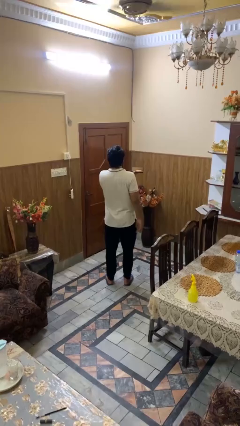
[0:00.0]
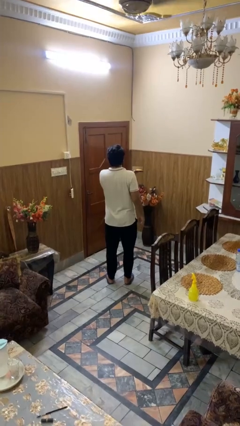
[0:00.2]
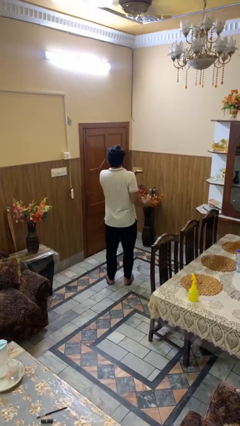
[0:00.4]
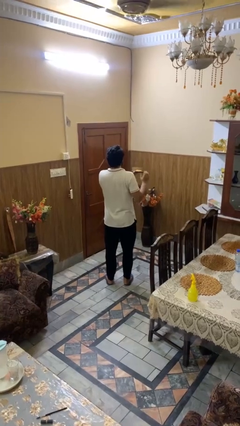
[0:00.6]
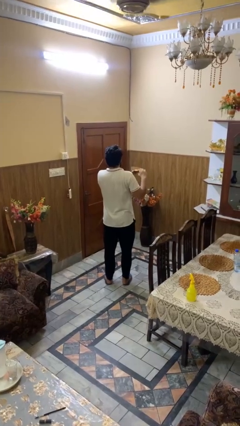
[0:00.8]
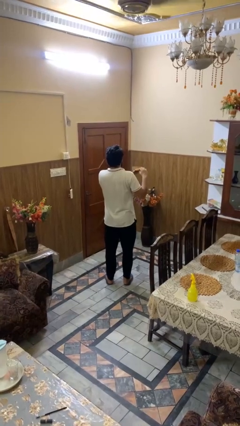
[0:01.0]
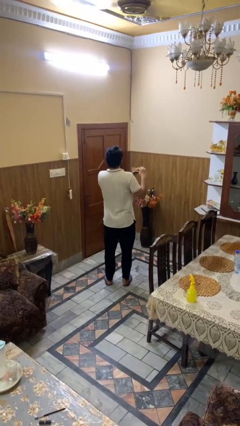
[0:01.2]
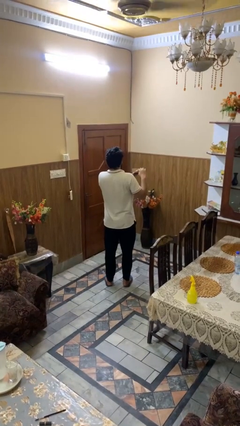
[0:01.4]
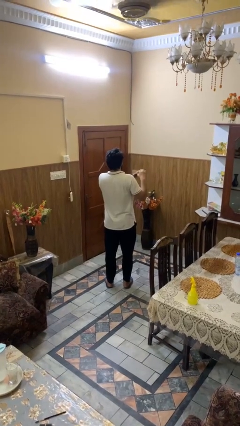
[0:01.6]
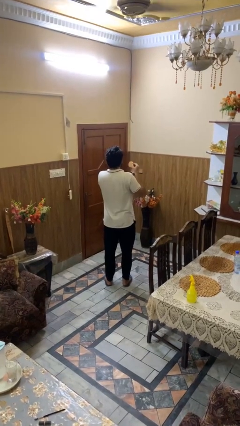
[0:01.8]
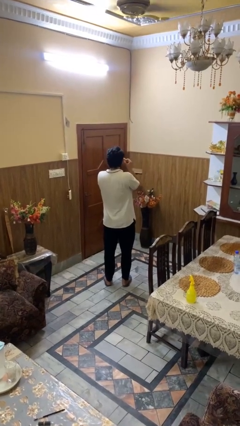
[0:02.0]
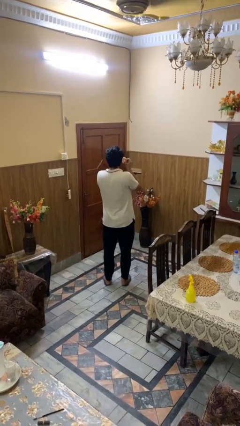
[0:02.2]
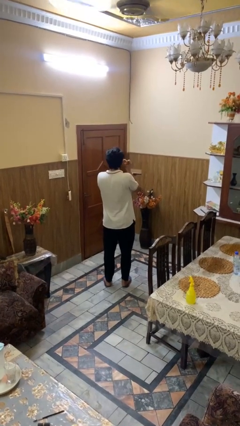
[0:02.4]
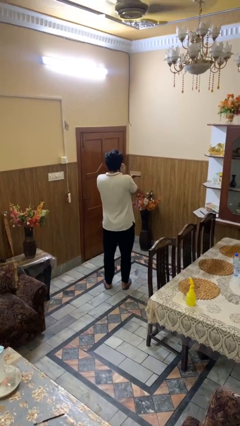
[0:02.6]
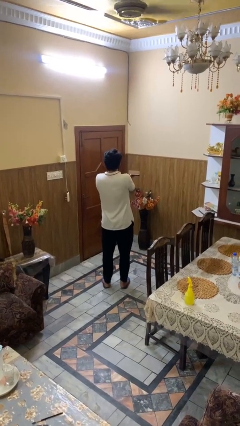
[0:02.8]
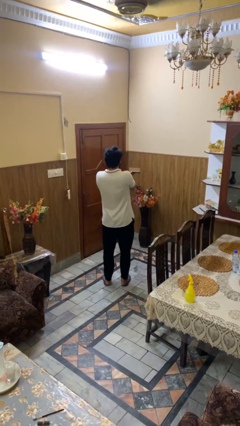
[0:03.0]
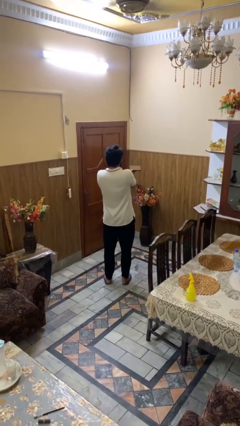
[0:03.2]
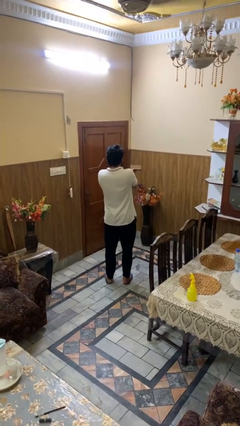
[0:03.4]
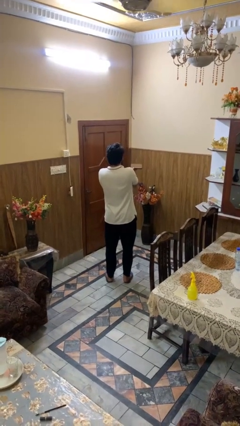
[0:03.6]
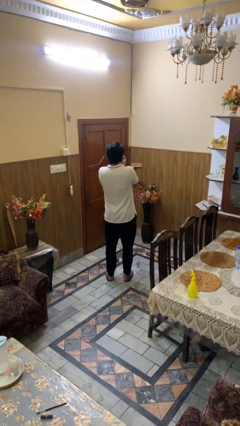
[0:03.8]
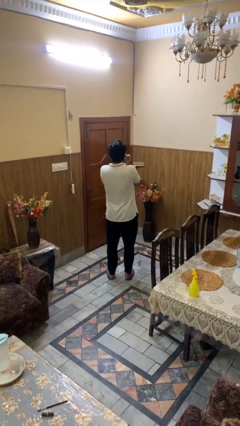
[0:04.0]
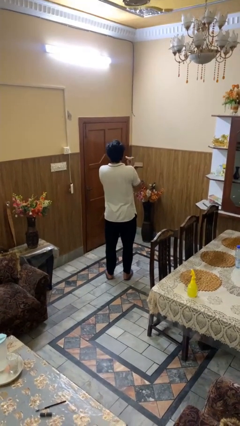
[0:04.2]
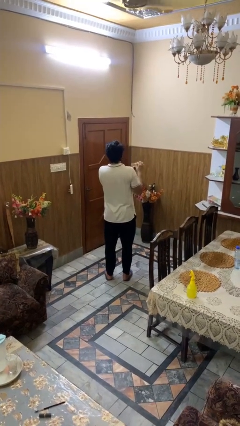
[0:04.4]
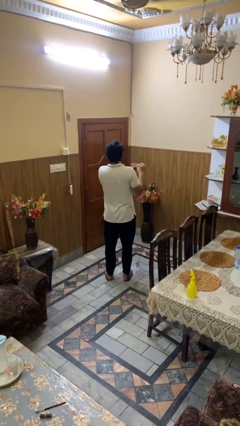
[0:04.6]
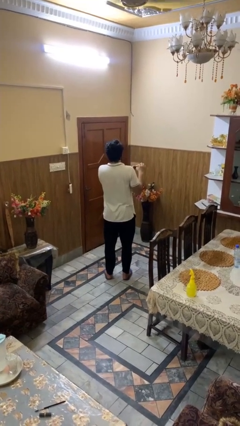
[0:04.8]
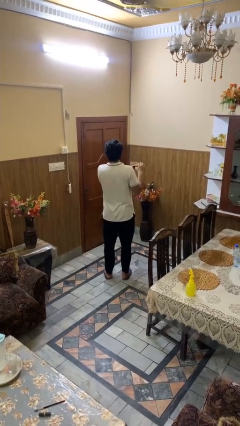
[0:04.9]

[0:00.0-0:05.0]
person applies foundation makeup

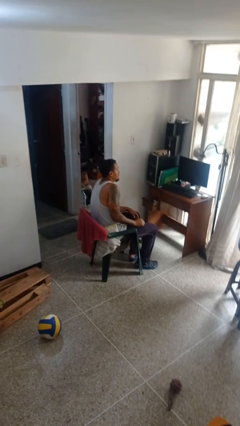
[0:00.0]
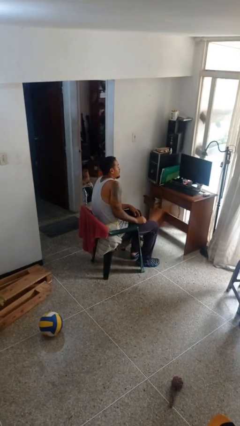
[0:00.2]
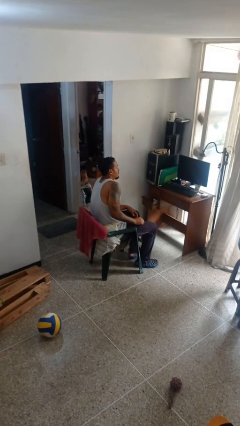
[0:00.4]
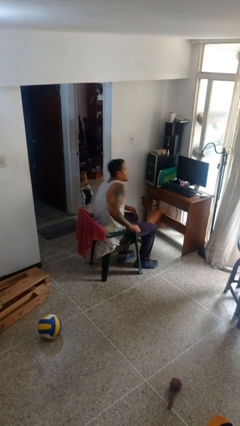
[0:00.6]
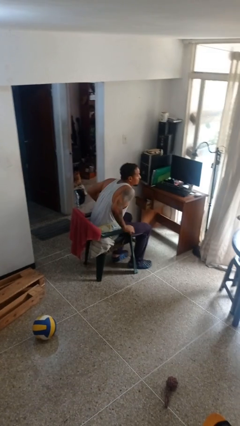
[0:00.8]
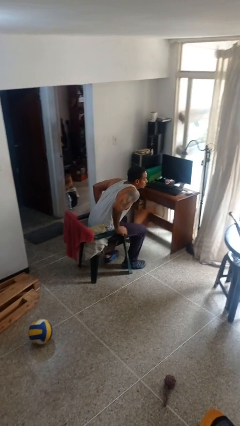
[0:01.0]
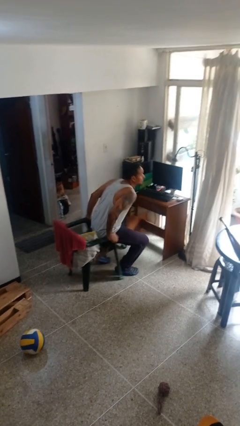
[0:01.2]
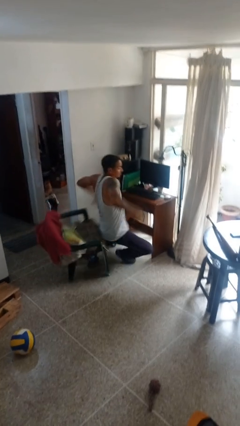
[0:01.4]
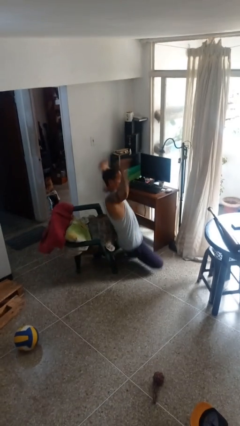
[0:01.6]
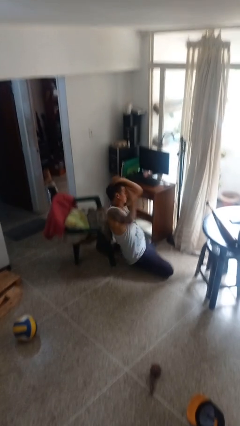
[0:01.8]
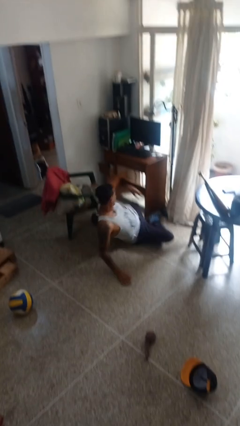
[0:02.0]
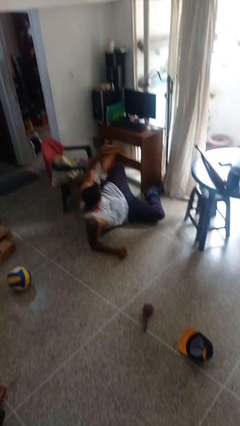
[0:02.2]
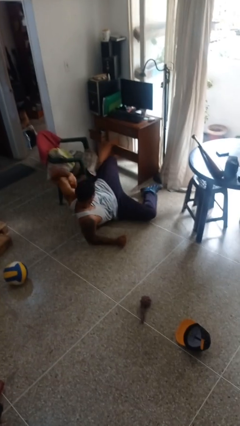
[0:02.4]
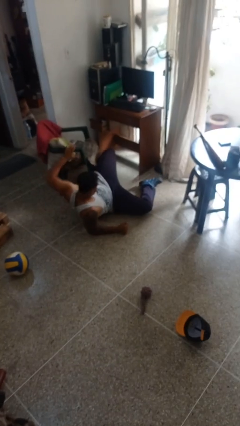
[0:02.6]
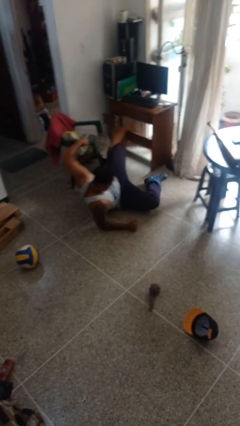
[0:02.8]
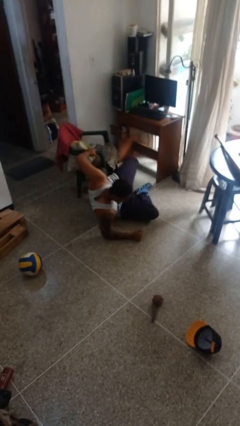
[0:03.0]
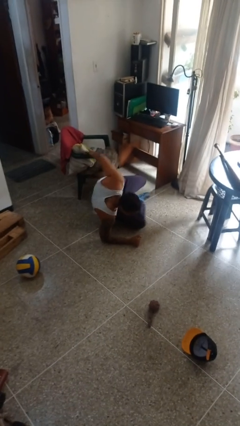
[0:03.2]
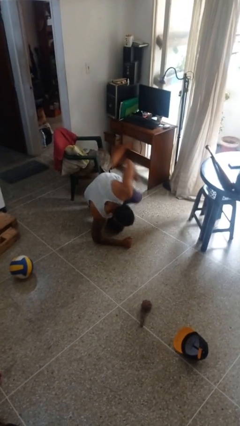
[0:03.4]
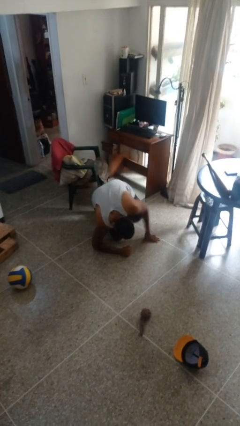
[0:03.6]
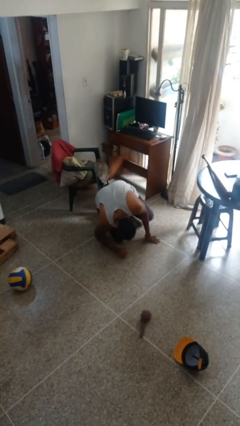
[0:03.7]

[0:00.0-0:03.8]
person falls from chair

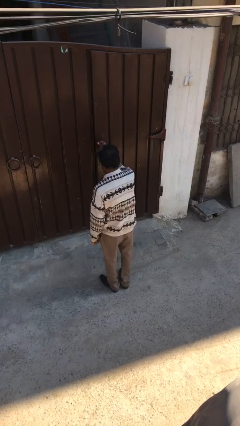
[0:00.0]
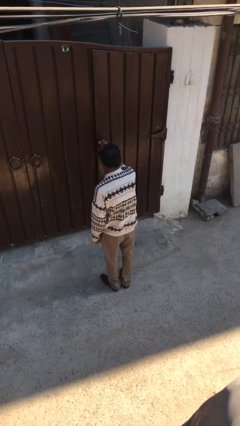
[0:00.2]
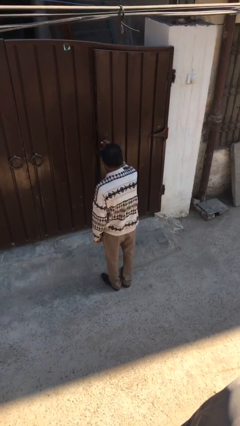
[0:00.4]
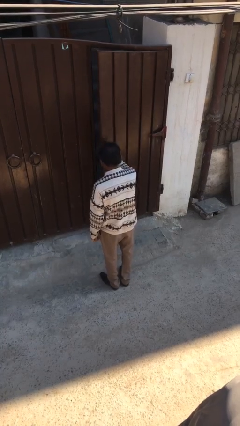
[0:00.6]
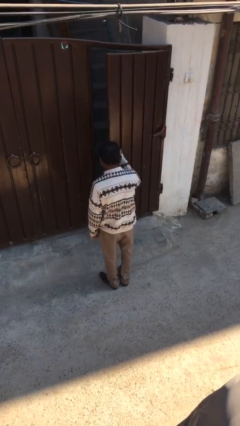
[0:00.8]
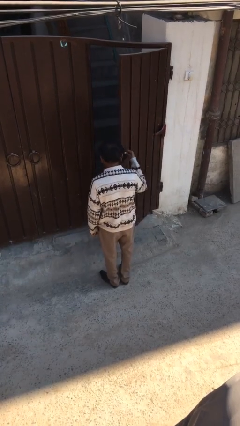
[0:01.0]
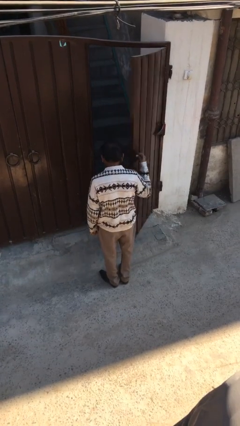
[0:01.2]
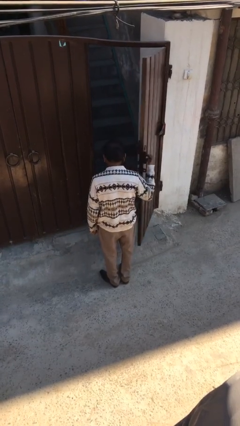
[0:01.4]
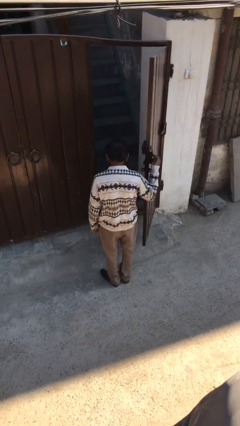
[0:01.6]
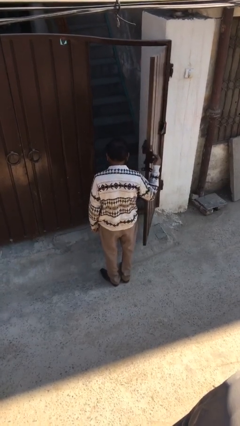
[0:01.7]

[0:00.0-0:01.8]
person opens facility door

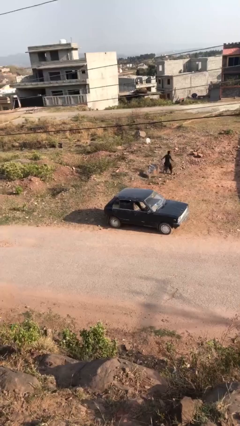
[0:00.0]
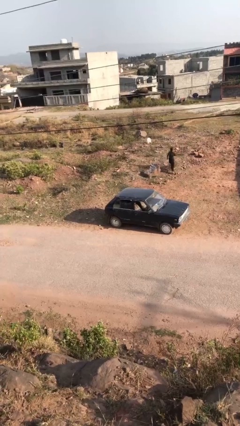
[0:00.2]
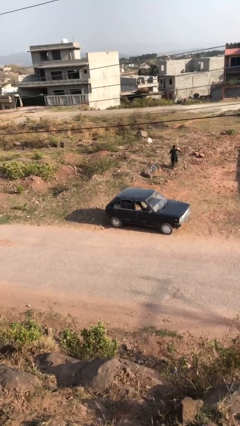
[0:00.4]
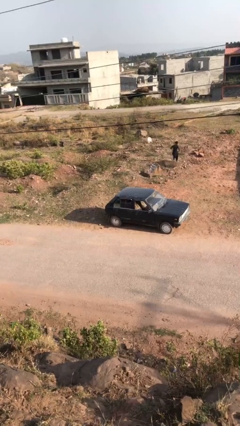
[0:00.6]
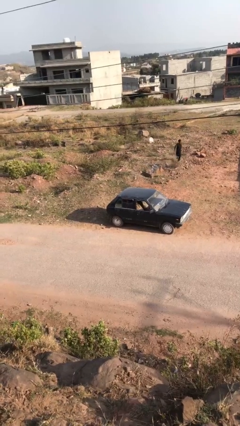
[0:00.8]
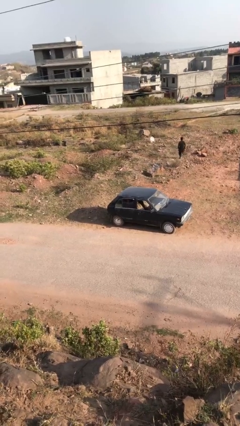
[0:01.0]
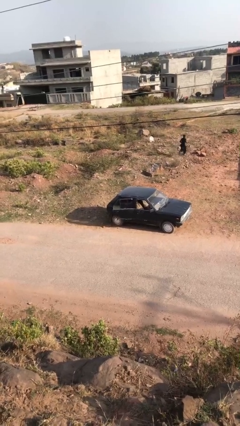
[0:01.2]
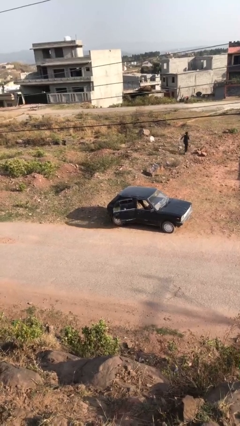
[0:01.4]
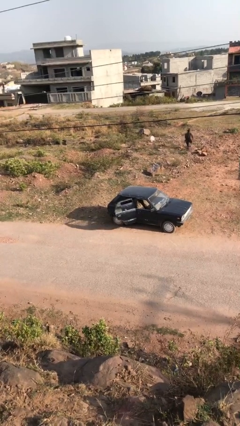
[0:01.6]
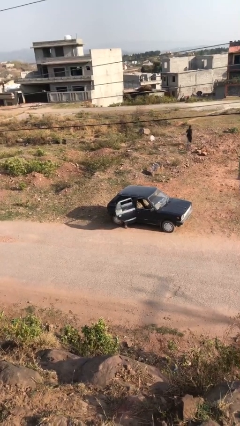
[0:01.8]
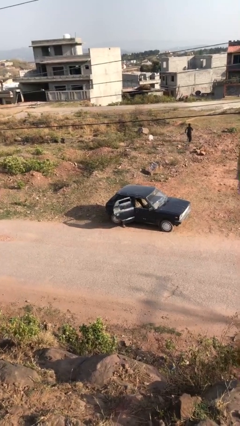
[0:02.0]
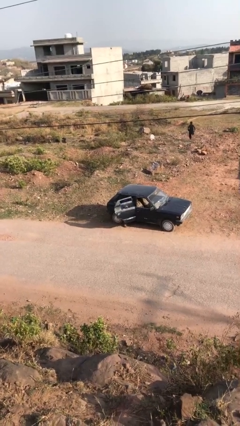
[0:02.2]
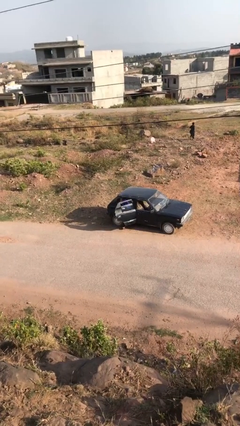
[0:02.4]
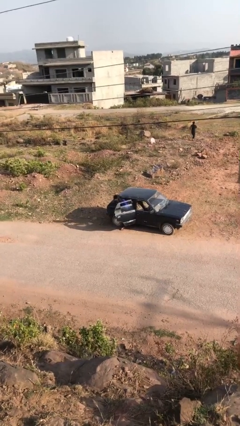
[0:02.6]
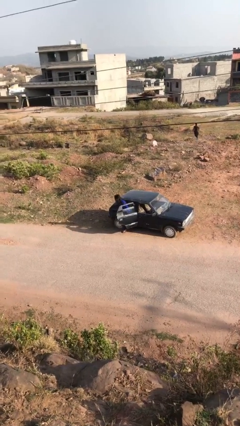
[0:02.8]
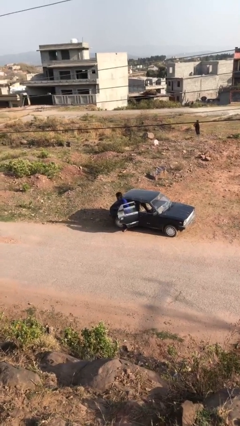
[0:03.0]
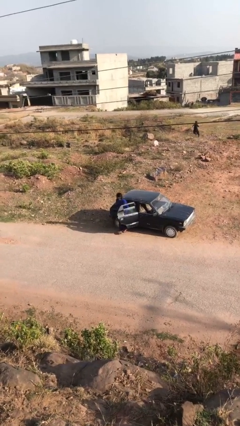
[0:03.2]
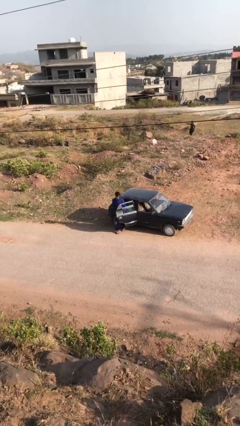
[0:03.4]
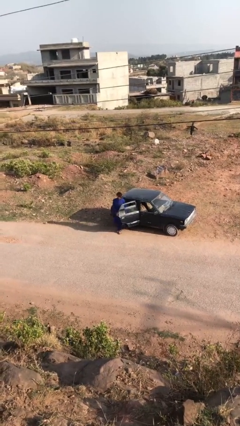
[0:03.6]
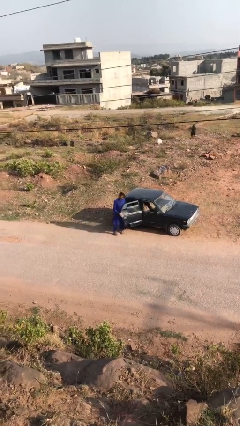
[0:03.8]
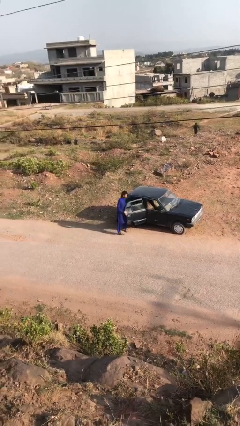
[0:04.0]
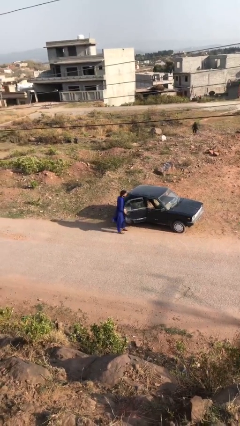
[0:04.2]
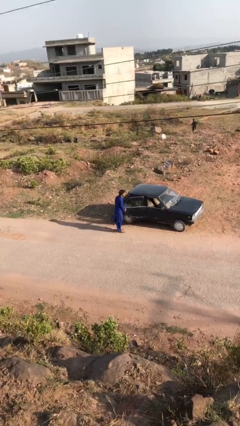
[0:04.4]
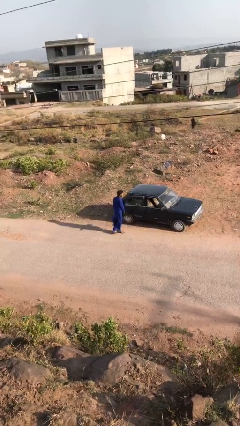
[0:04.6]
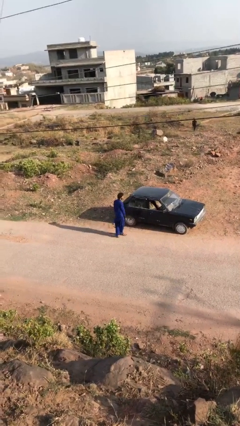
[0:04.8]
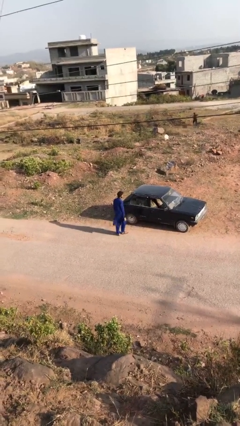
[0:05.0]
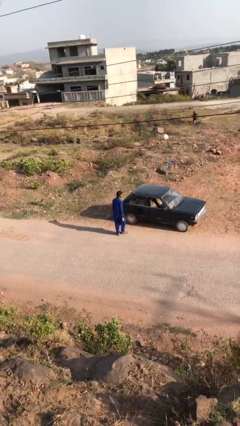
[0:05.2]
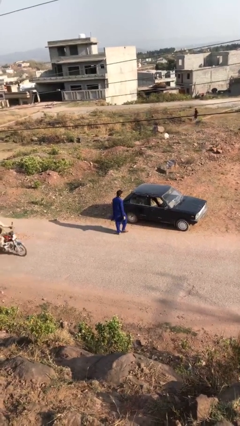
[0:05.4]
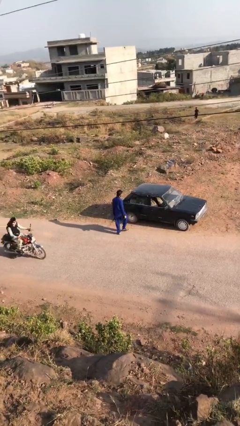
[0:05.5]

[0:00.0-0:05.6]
car drops off person

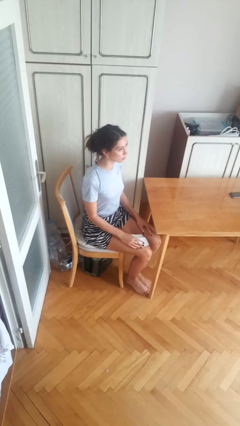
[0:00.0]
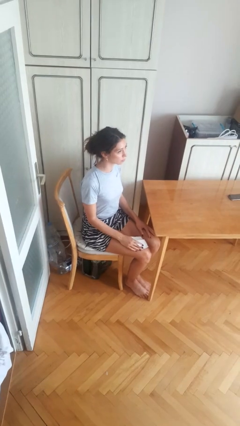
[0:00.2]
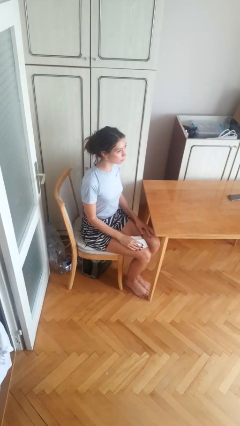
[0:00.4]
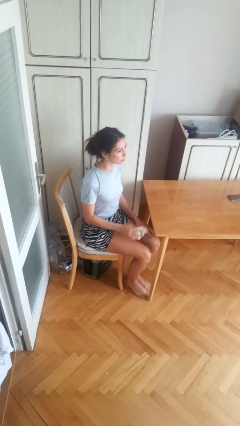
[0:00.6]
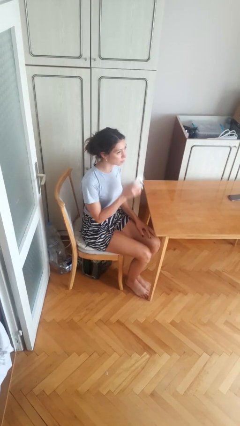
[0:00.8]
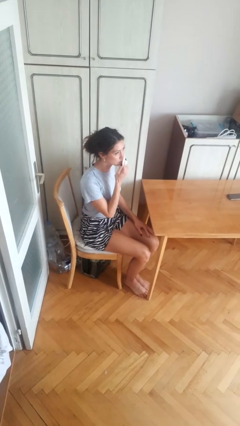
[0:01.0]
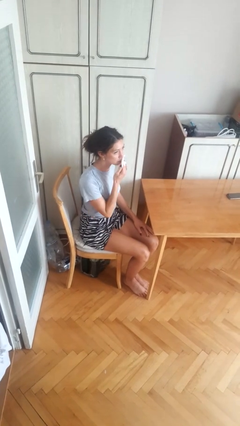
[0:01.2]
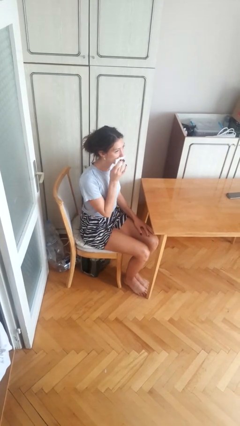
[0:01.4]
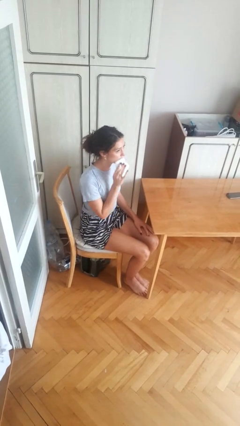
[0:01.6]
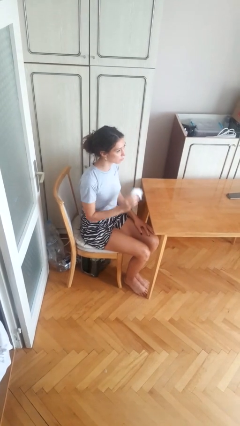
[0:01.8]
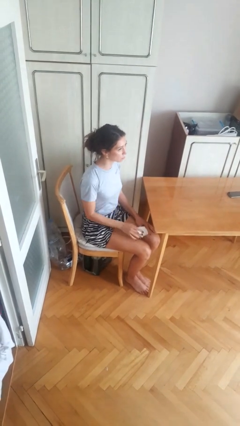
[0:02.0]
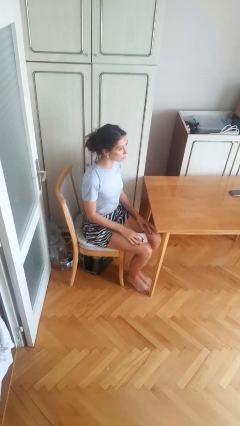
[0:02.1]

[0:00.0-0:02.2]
person wipes mouth with napkin
